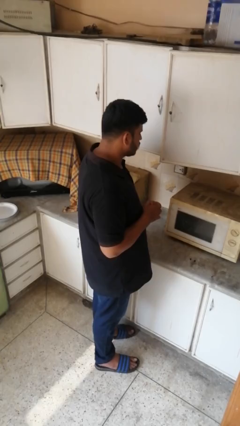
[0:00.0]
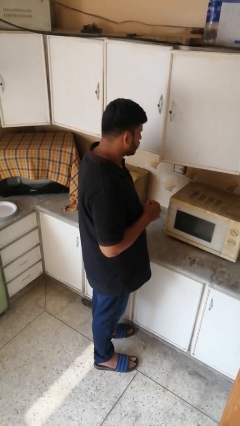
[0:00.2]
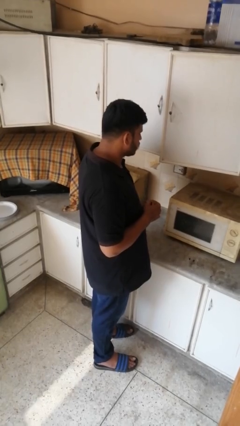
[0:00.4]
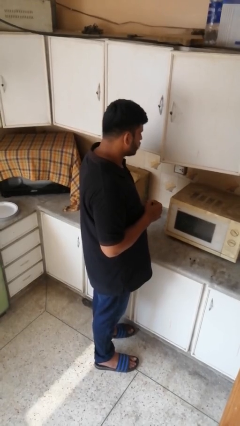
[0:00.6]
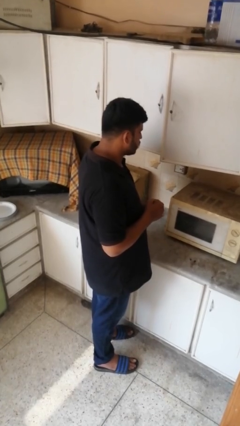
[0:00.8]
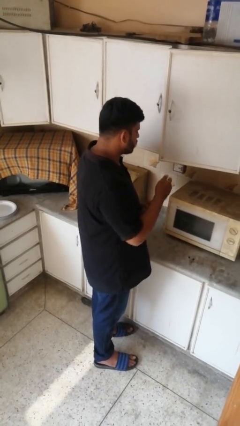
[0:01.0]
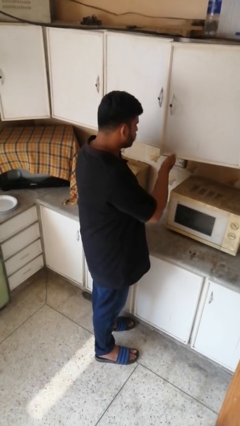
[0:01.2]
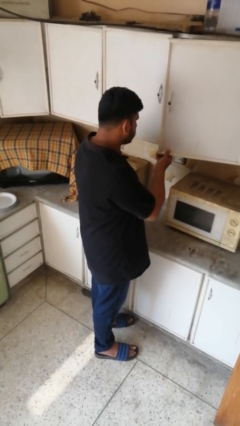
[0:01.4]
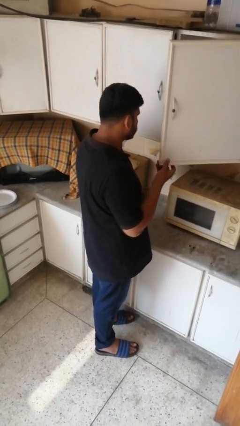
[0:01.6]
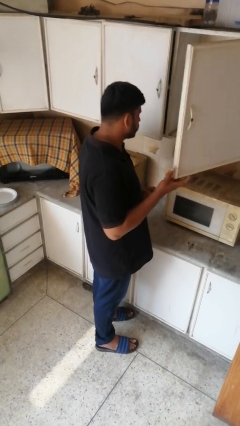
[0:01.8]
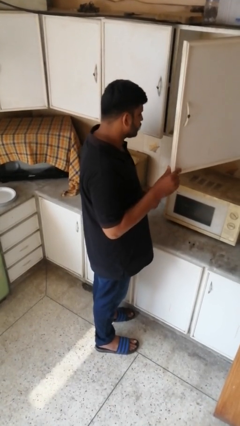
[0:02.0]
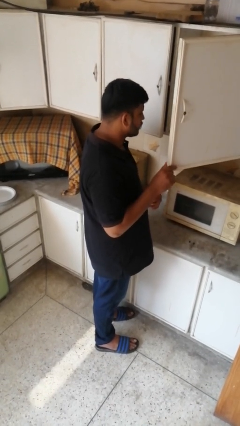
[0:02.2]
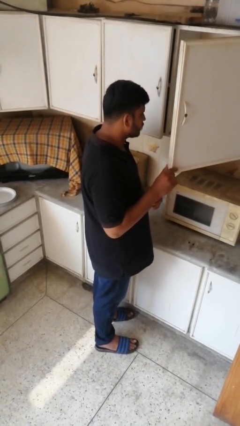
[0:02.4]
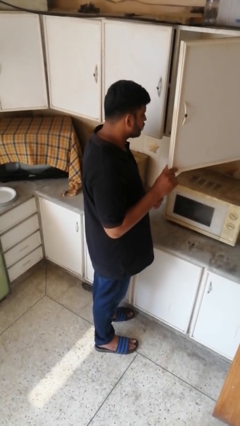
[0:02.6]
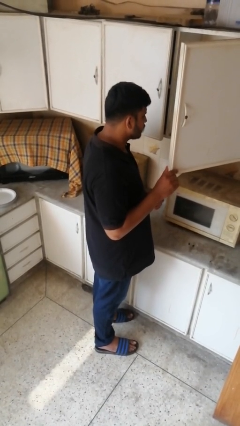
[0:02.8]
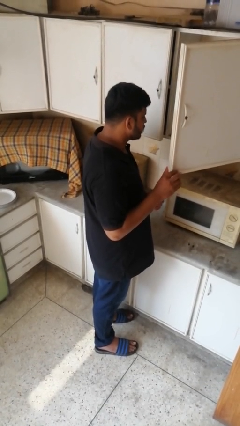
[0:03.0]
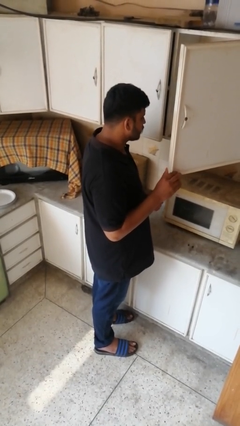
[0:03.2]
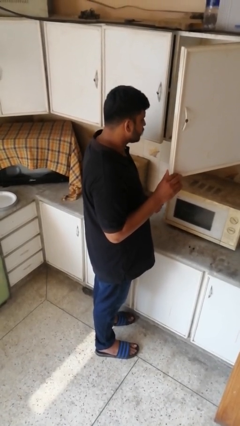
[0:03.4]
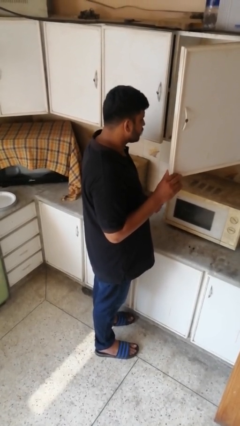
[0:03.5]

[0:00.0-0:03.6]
person opens cabinet

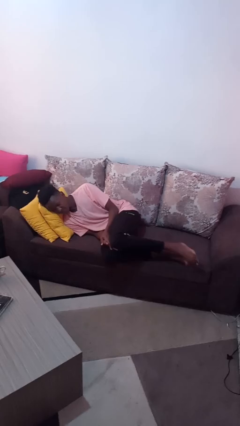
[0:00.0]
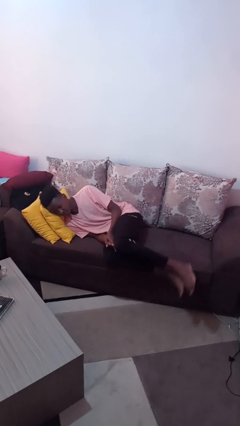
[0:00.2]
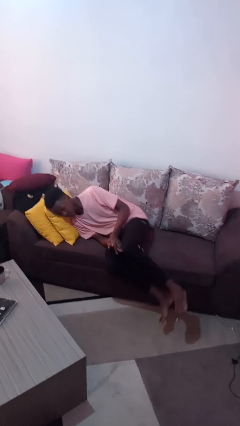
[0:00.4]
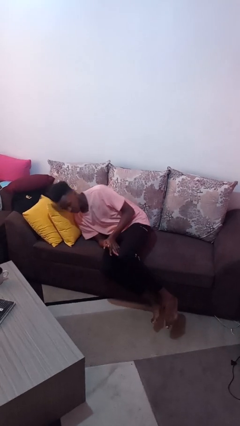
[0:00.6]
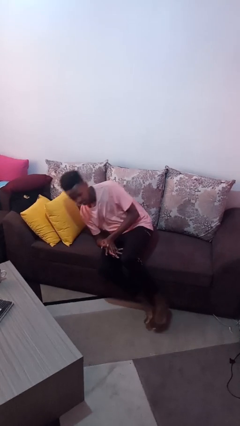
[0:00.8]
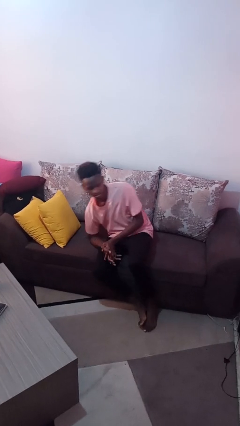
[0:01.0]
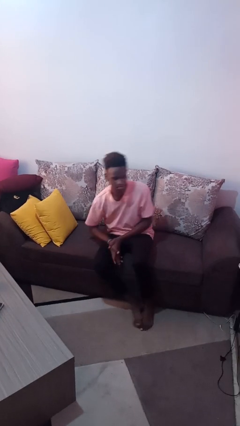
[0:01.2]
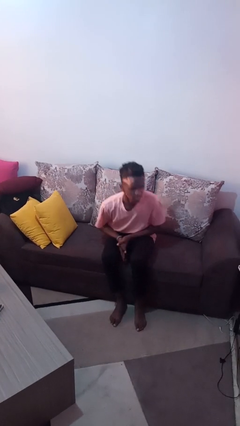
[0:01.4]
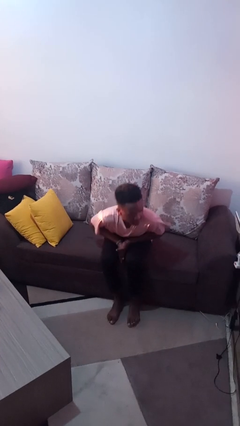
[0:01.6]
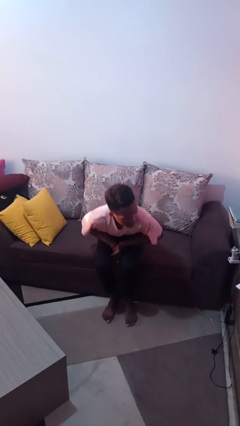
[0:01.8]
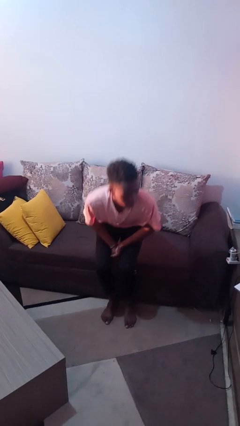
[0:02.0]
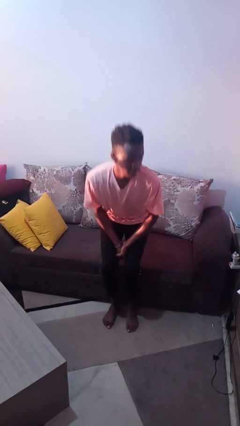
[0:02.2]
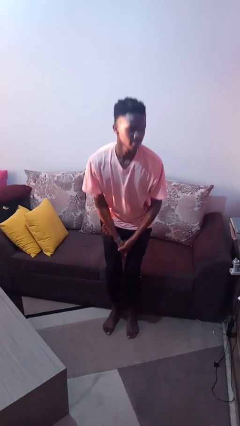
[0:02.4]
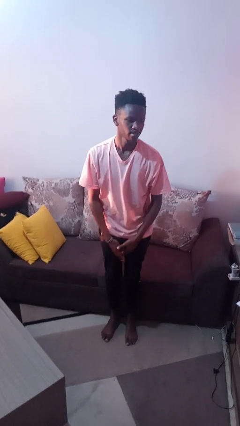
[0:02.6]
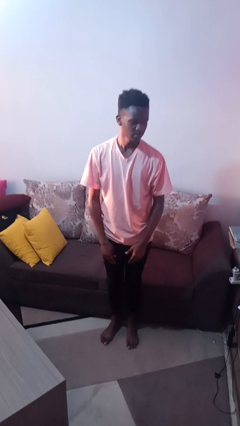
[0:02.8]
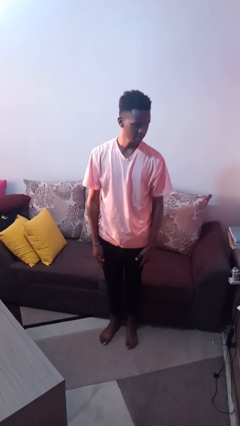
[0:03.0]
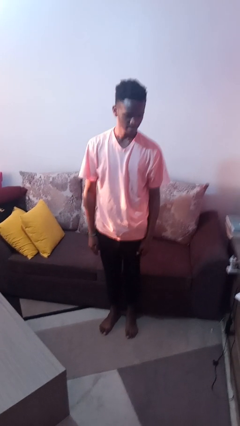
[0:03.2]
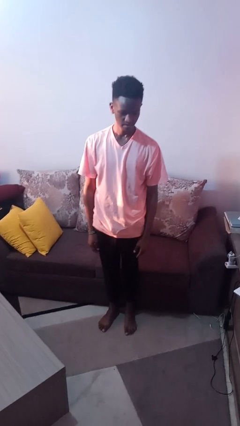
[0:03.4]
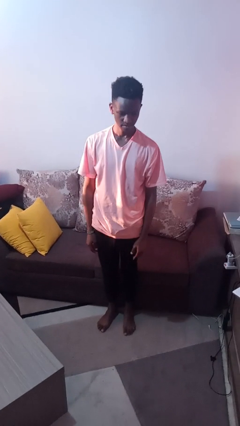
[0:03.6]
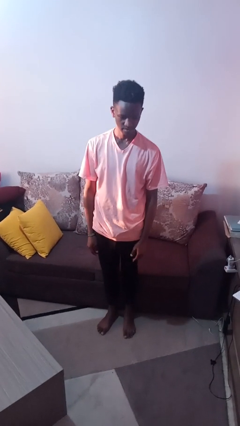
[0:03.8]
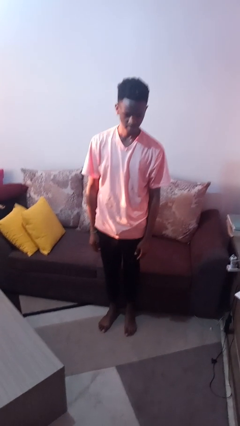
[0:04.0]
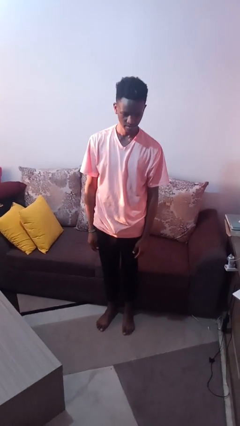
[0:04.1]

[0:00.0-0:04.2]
person stands up

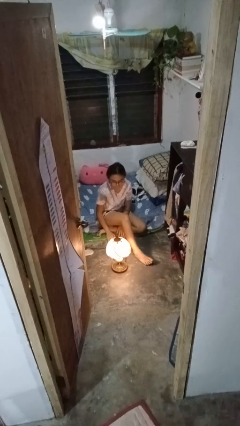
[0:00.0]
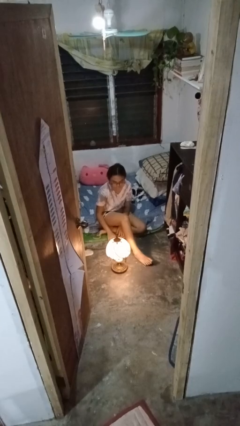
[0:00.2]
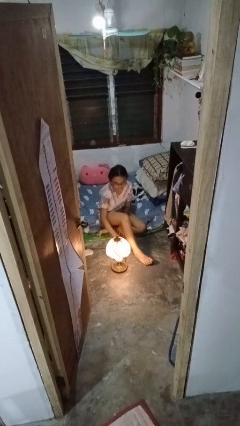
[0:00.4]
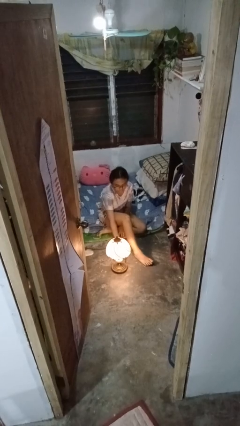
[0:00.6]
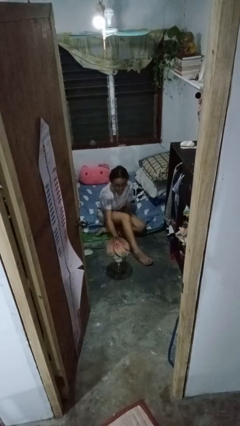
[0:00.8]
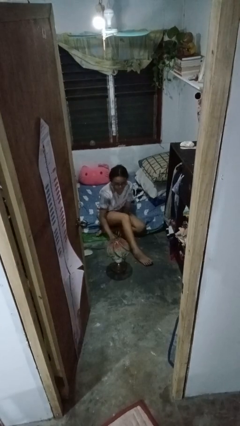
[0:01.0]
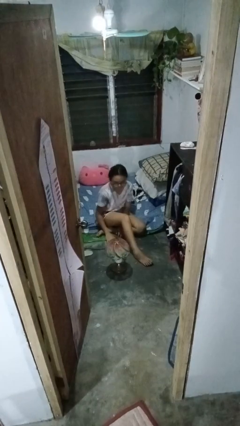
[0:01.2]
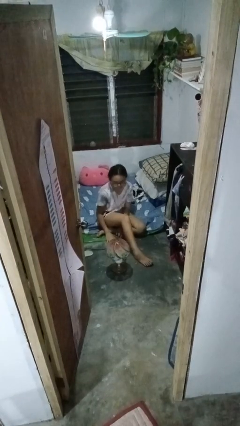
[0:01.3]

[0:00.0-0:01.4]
person turns off lamp

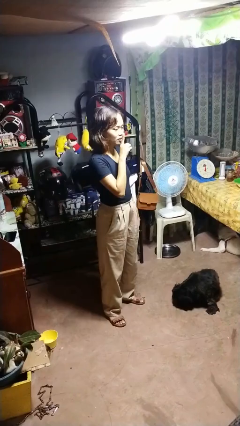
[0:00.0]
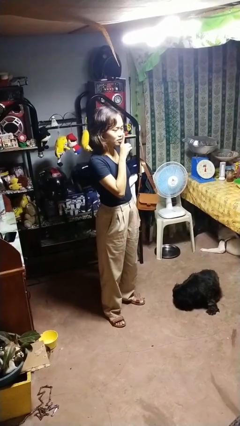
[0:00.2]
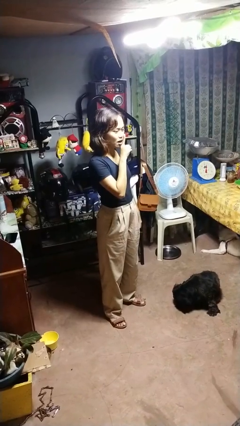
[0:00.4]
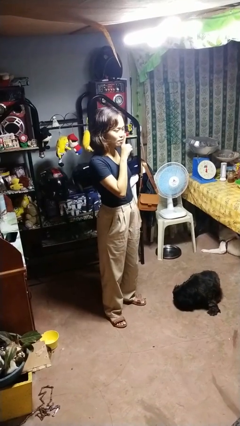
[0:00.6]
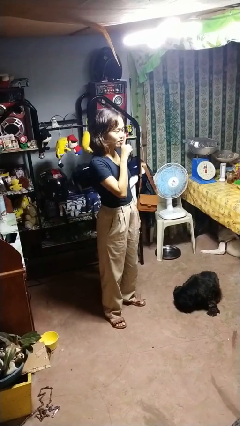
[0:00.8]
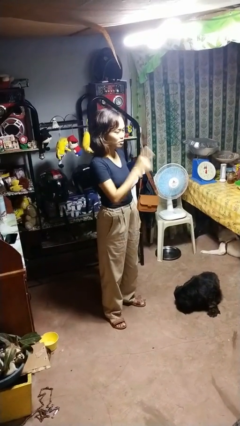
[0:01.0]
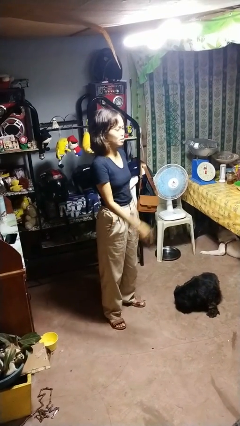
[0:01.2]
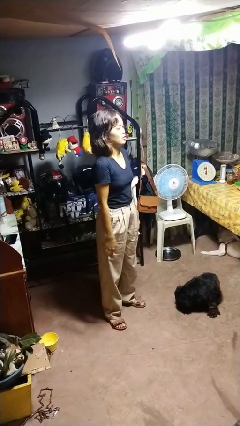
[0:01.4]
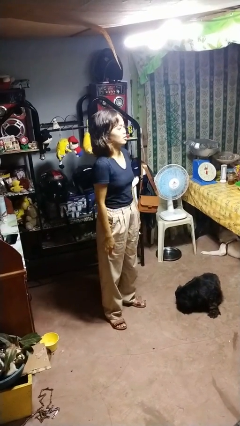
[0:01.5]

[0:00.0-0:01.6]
person gestures be quiet

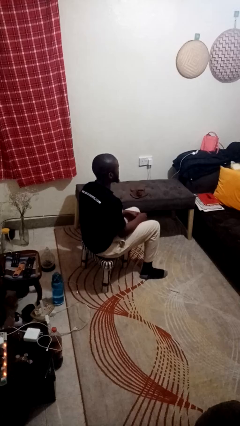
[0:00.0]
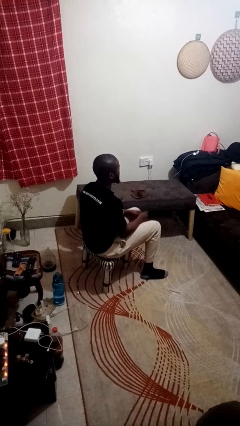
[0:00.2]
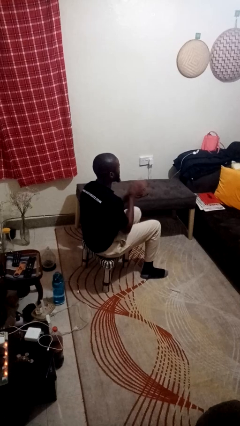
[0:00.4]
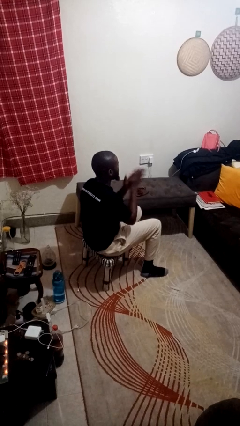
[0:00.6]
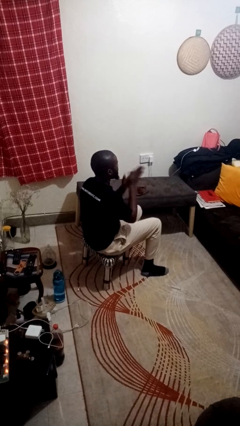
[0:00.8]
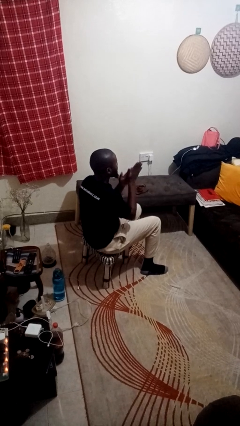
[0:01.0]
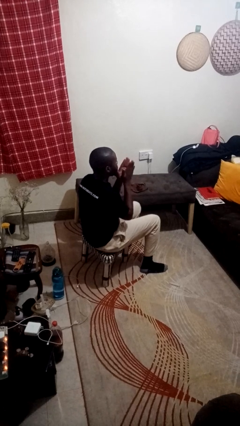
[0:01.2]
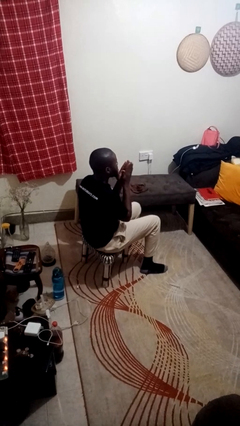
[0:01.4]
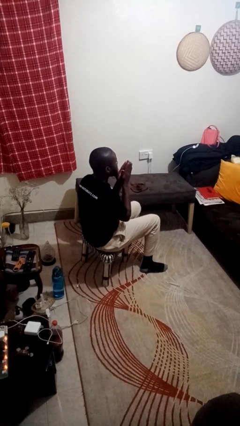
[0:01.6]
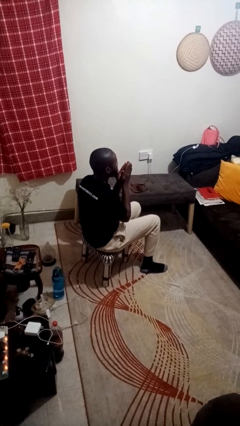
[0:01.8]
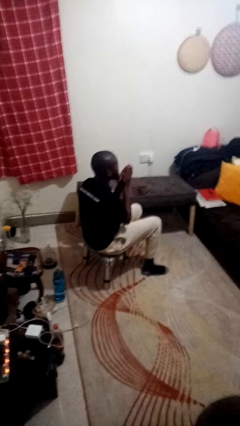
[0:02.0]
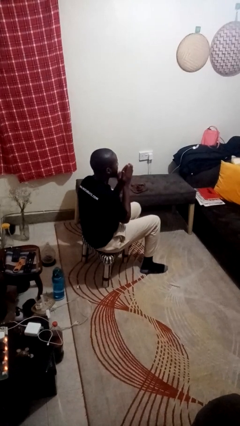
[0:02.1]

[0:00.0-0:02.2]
person blows into hands

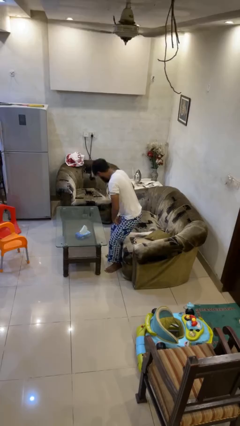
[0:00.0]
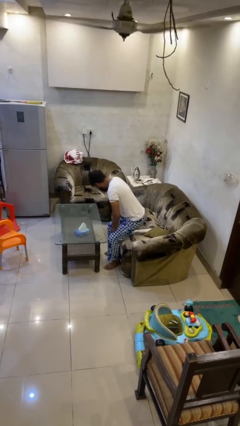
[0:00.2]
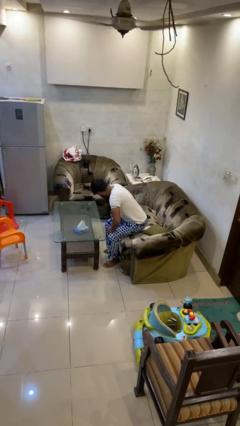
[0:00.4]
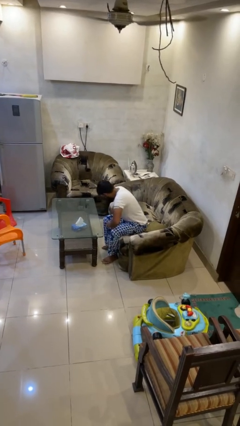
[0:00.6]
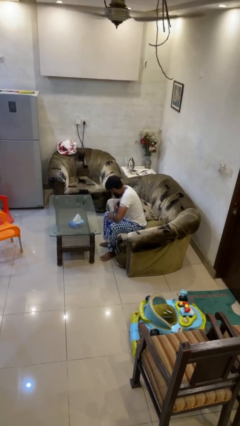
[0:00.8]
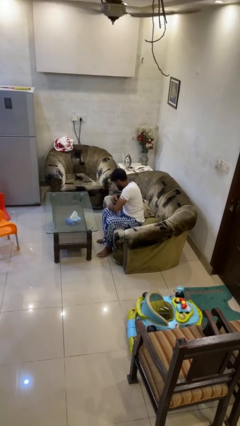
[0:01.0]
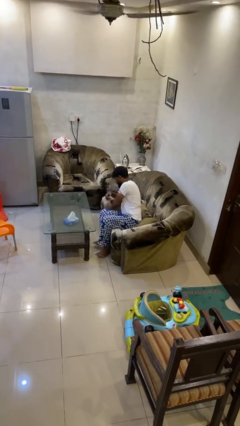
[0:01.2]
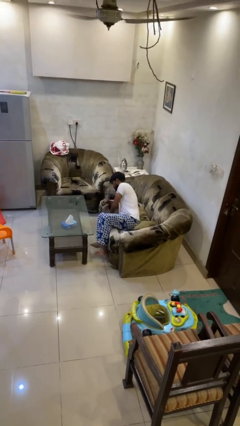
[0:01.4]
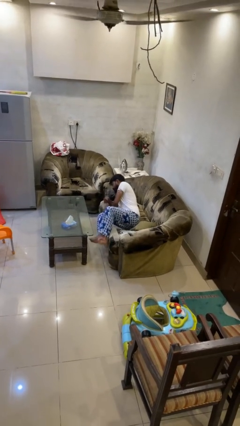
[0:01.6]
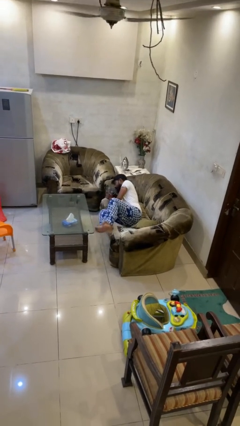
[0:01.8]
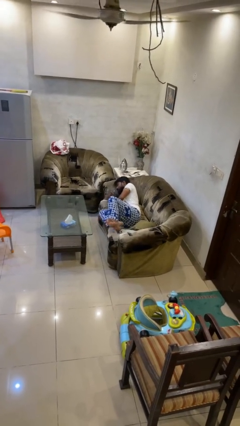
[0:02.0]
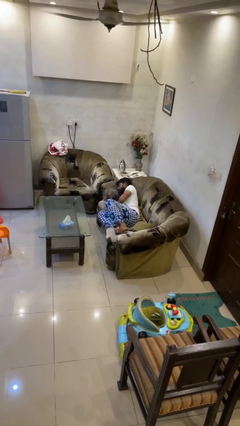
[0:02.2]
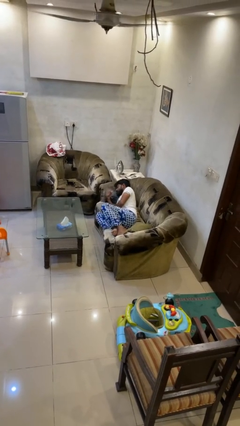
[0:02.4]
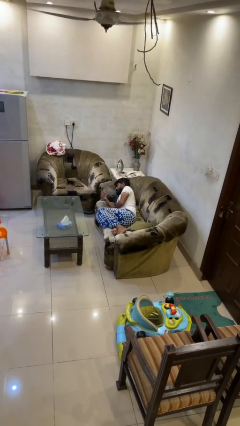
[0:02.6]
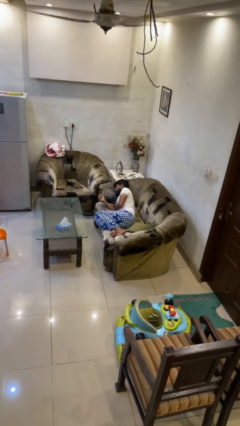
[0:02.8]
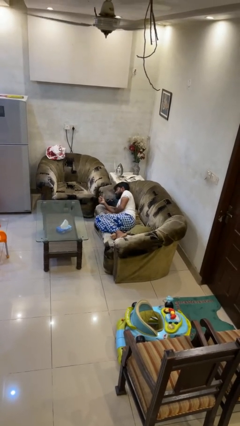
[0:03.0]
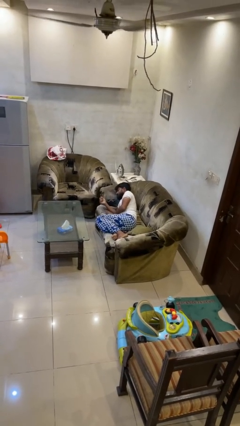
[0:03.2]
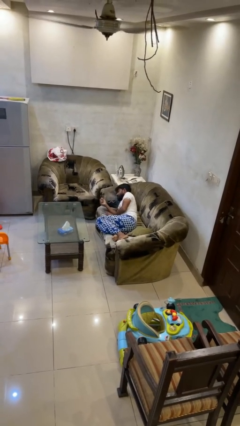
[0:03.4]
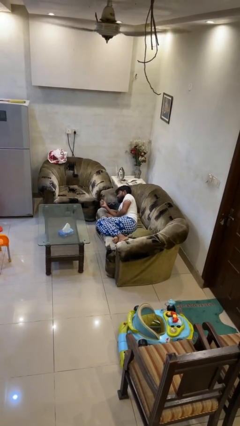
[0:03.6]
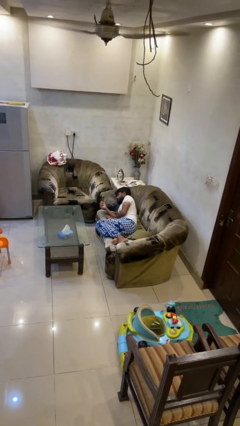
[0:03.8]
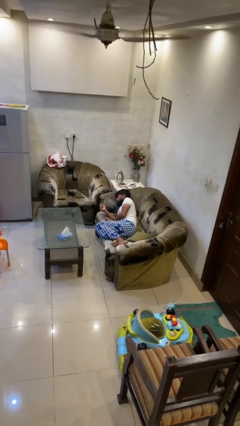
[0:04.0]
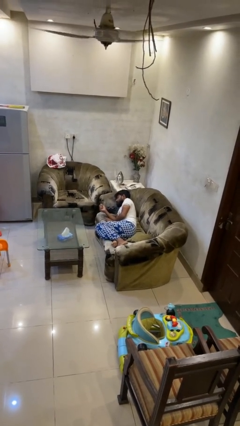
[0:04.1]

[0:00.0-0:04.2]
person lies down on couch
